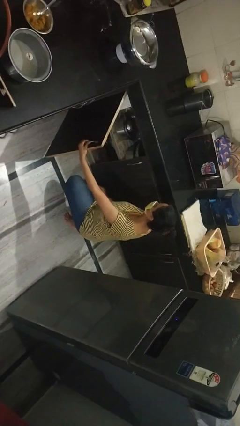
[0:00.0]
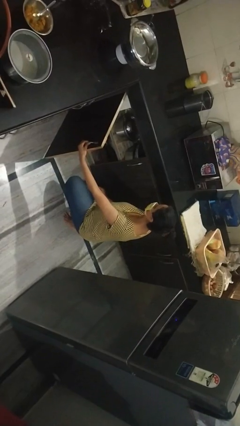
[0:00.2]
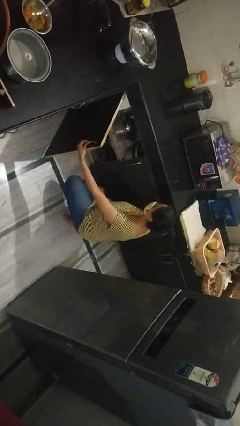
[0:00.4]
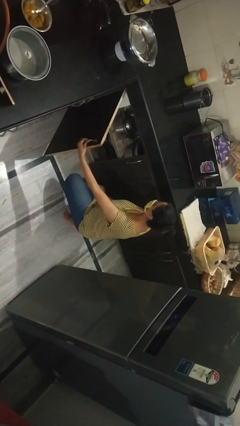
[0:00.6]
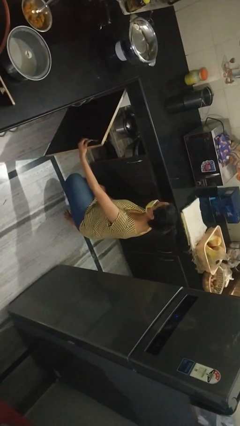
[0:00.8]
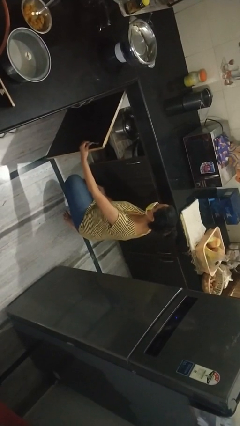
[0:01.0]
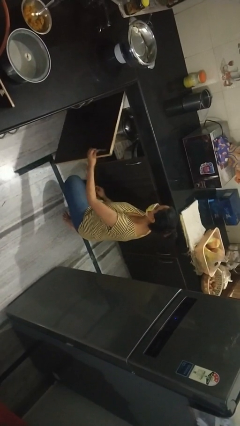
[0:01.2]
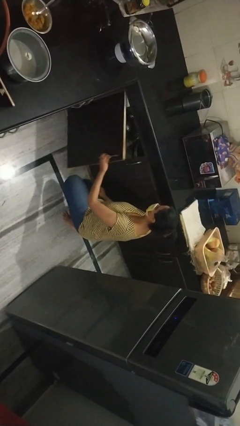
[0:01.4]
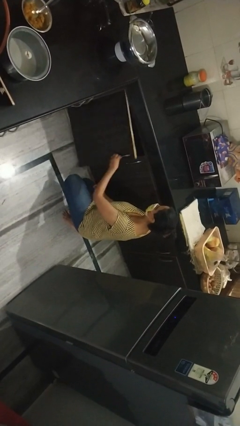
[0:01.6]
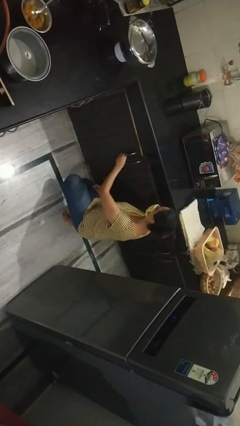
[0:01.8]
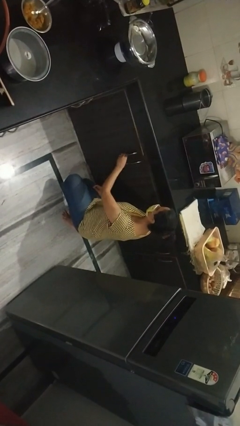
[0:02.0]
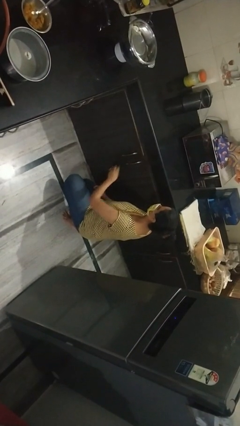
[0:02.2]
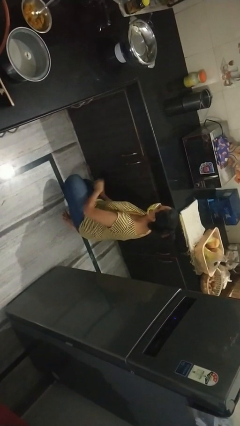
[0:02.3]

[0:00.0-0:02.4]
person closes cabinet

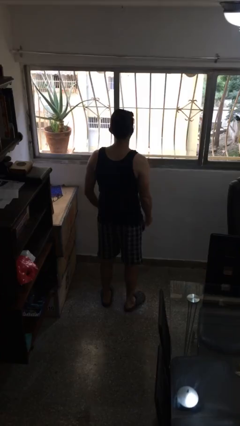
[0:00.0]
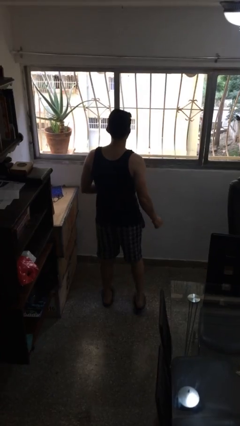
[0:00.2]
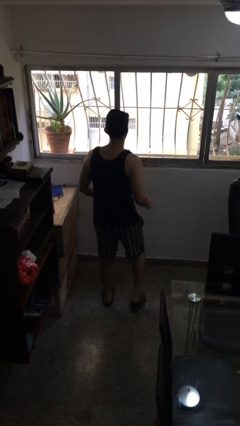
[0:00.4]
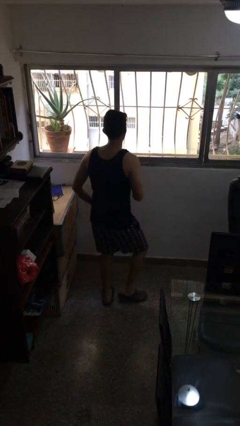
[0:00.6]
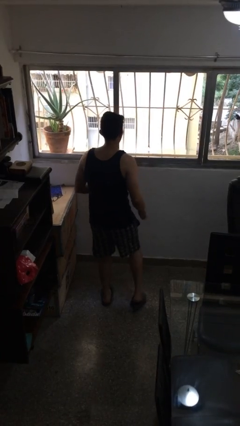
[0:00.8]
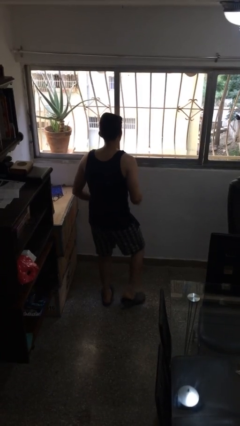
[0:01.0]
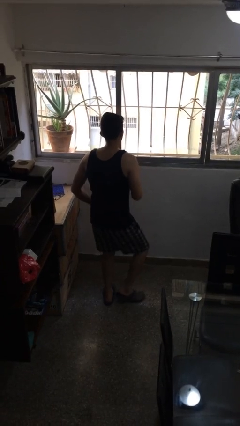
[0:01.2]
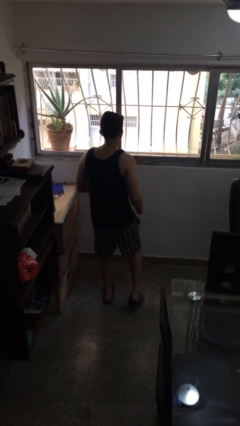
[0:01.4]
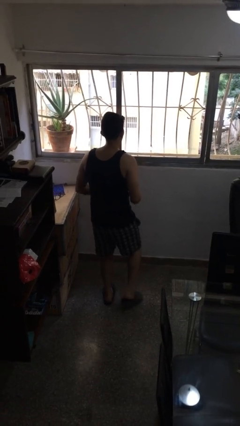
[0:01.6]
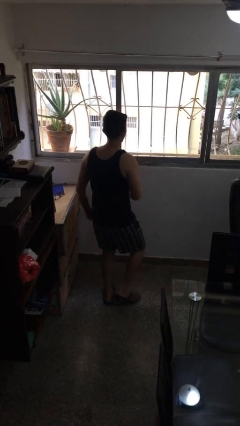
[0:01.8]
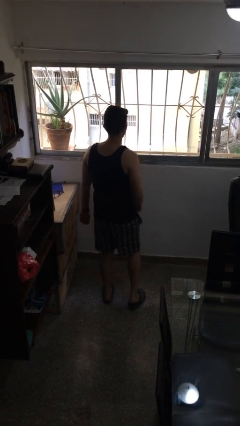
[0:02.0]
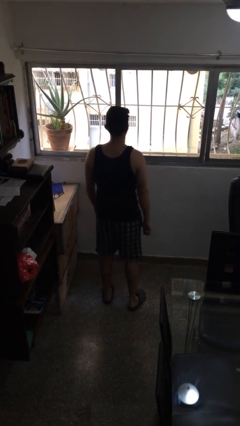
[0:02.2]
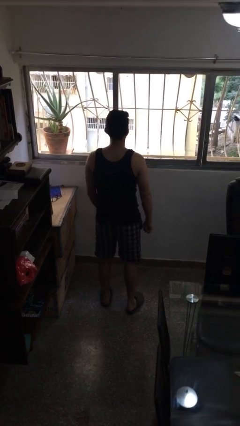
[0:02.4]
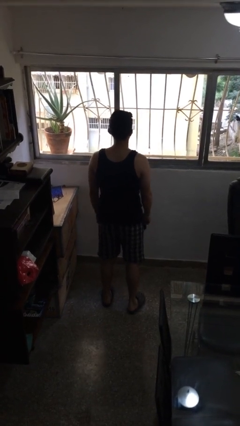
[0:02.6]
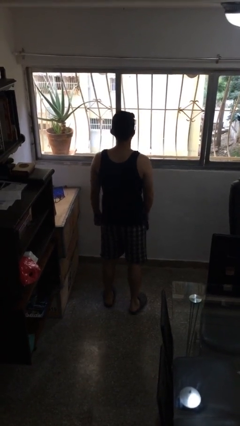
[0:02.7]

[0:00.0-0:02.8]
person dances in place

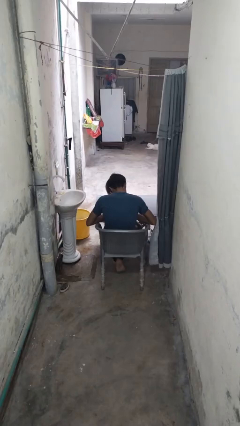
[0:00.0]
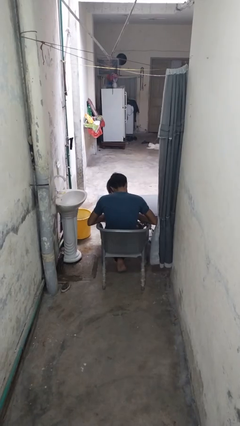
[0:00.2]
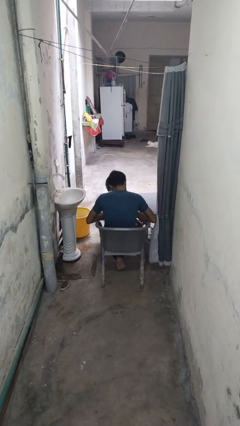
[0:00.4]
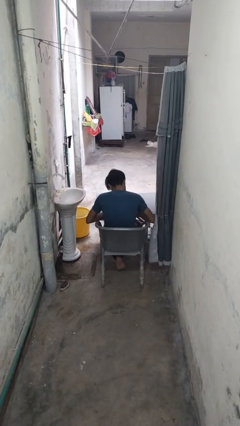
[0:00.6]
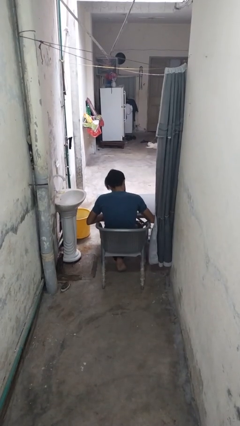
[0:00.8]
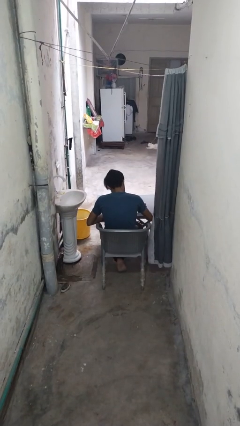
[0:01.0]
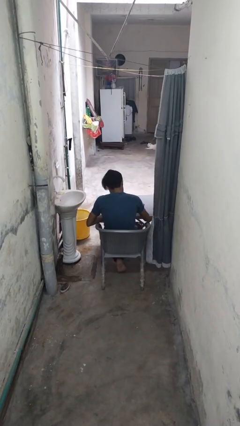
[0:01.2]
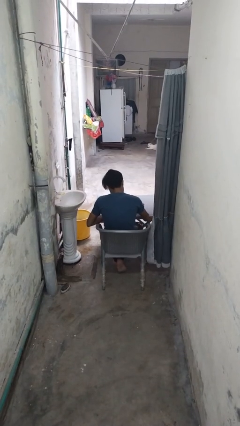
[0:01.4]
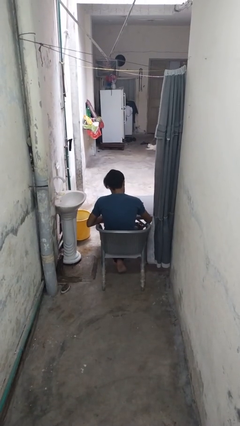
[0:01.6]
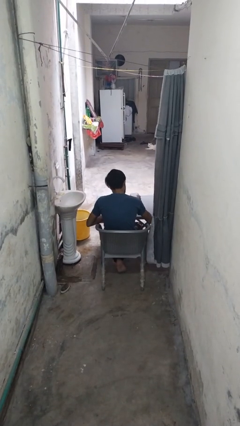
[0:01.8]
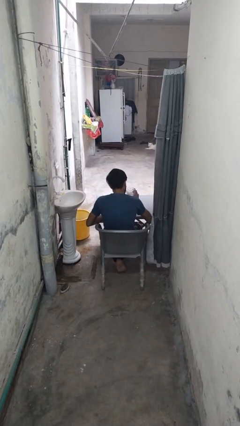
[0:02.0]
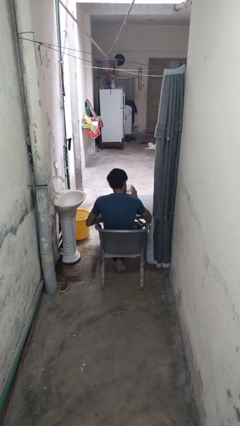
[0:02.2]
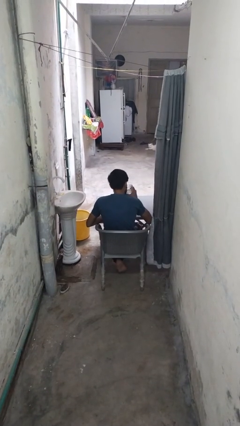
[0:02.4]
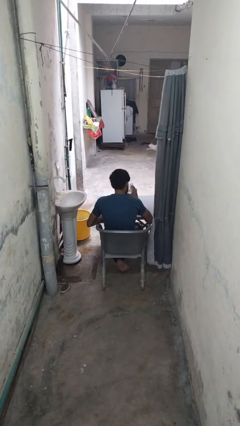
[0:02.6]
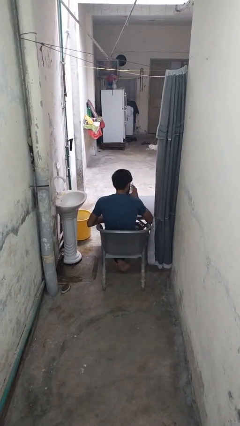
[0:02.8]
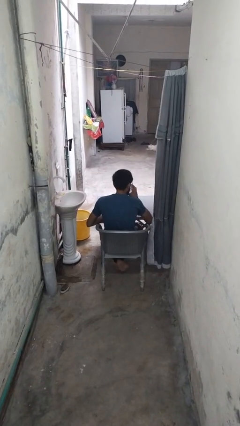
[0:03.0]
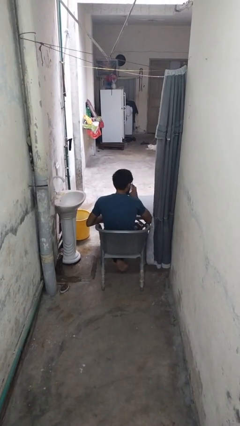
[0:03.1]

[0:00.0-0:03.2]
person picks up object from table

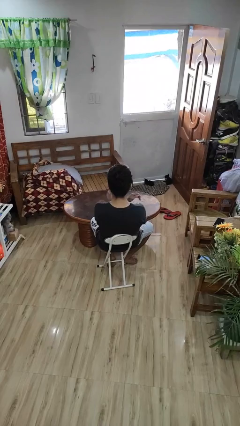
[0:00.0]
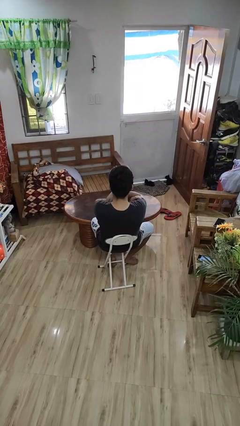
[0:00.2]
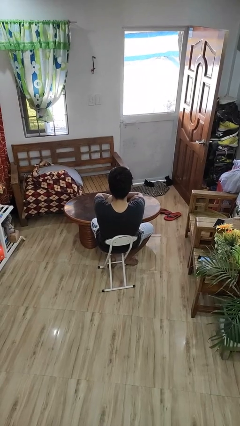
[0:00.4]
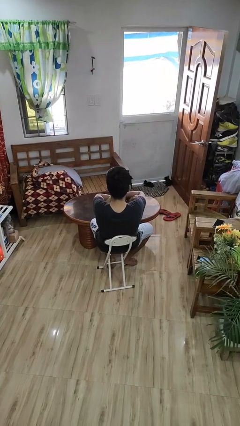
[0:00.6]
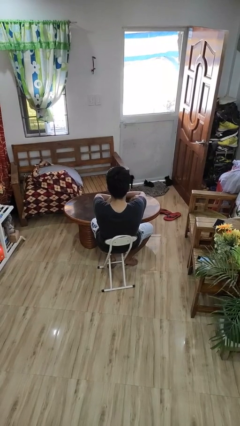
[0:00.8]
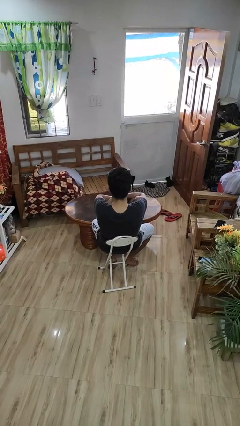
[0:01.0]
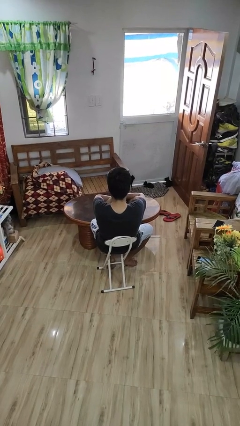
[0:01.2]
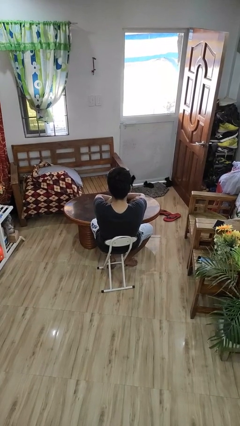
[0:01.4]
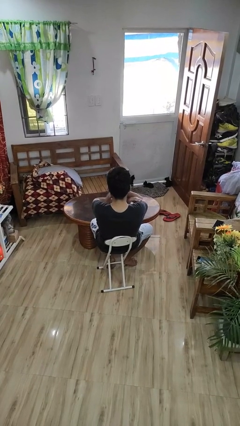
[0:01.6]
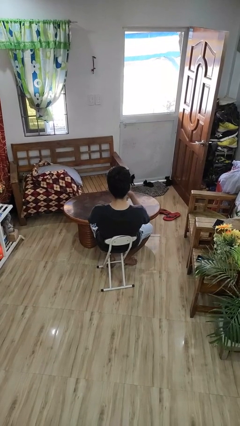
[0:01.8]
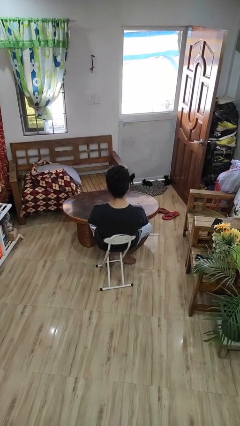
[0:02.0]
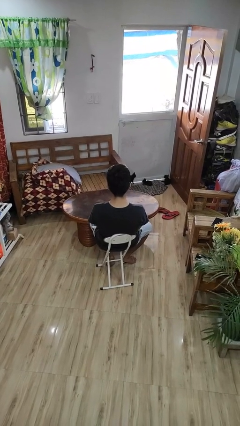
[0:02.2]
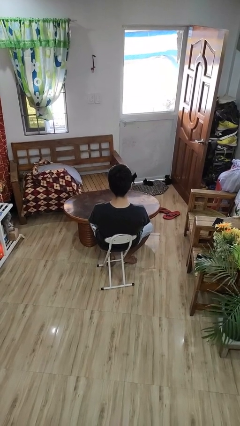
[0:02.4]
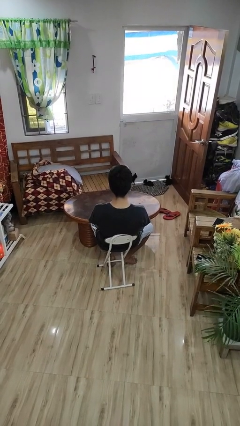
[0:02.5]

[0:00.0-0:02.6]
person crosses arms

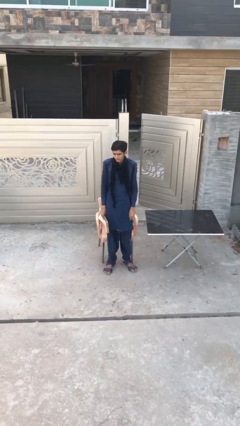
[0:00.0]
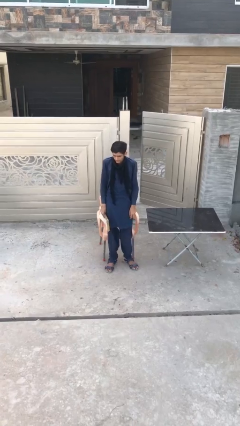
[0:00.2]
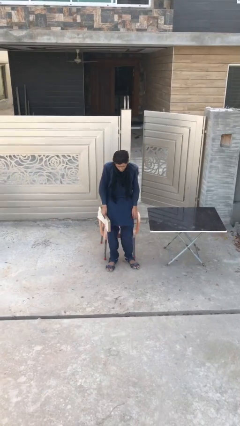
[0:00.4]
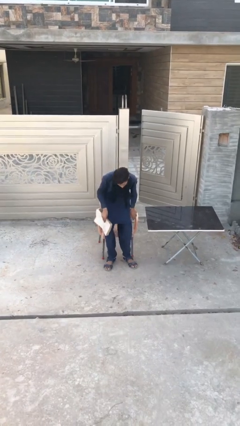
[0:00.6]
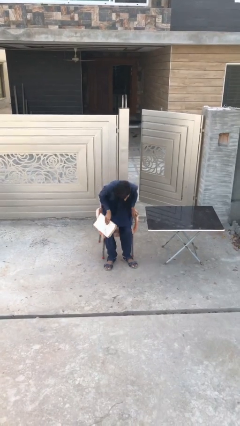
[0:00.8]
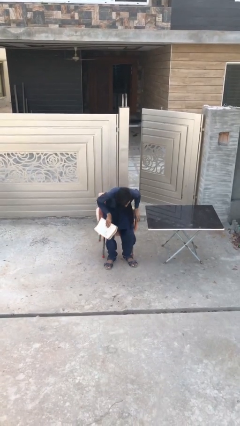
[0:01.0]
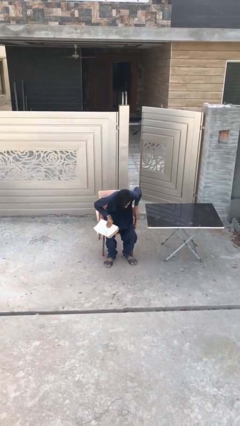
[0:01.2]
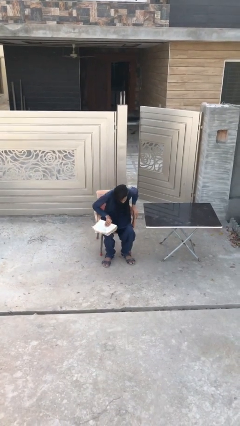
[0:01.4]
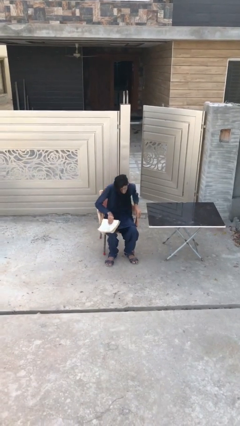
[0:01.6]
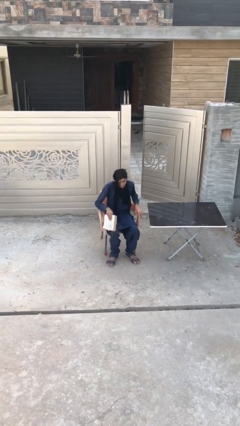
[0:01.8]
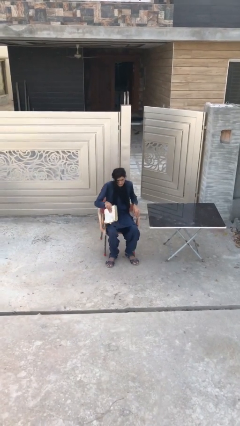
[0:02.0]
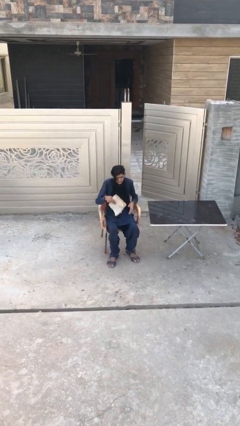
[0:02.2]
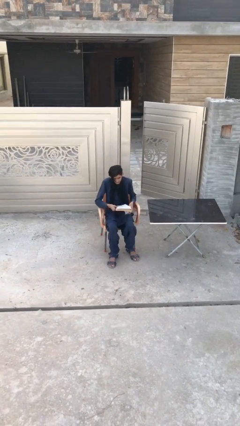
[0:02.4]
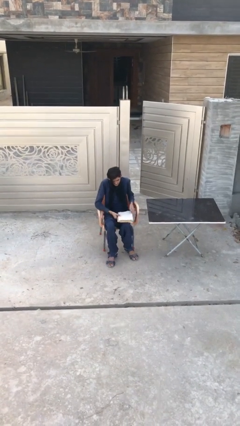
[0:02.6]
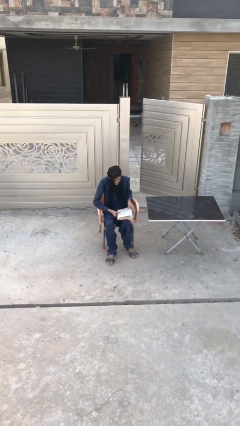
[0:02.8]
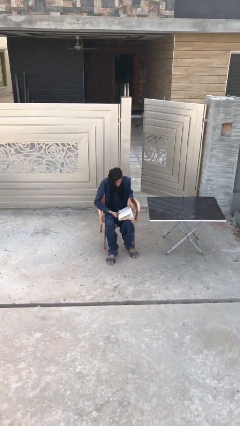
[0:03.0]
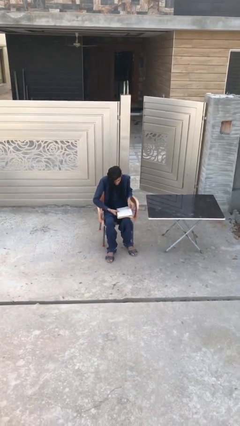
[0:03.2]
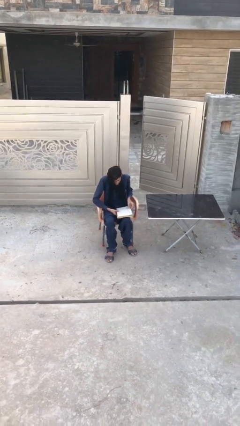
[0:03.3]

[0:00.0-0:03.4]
person sits down

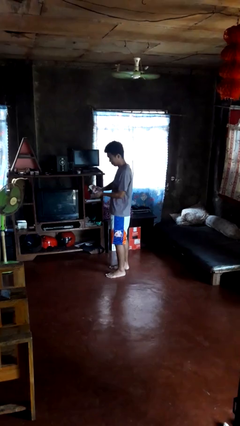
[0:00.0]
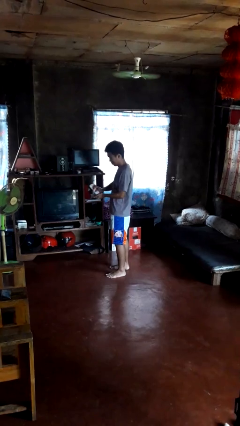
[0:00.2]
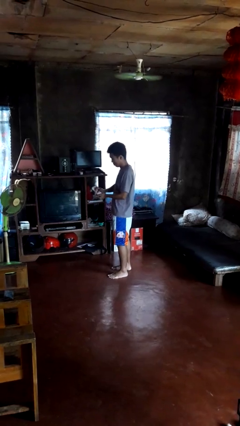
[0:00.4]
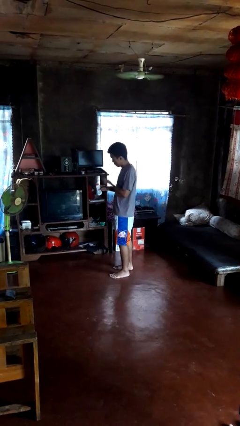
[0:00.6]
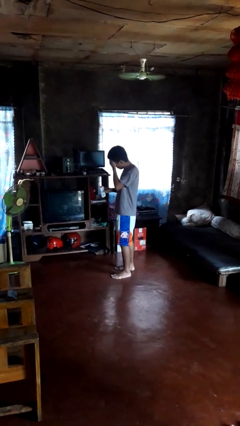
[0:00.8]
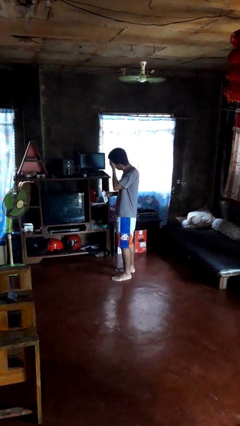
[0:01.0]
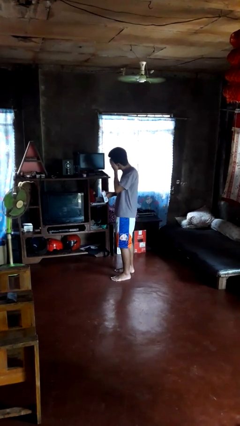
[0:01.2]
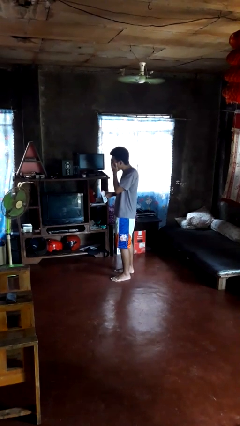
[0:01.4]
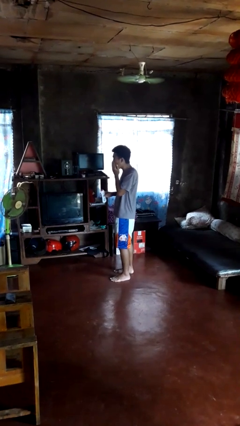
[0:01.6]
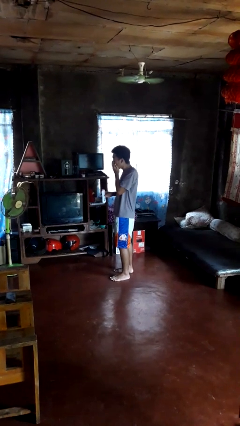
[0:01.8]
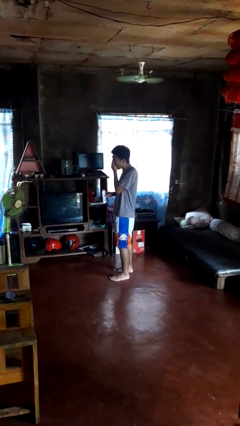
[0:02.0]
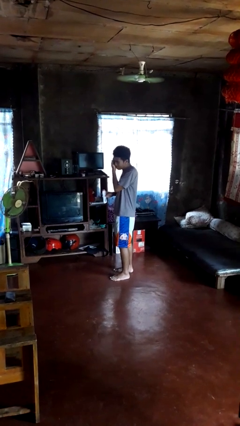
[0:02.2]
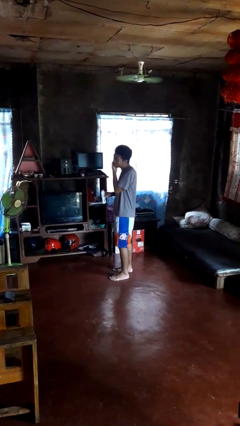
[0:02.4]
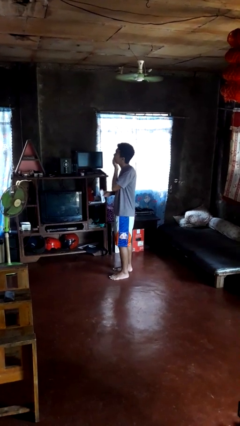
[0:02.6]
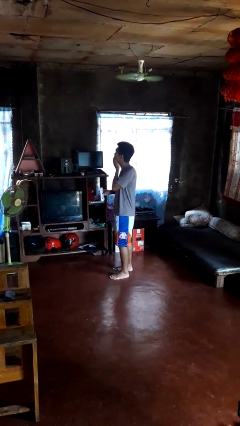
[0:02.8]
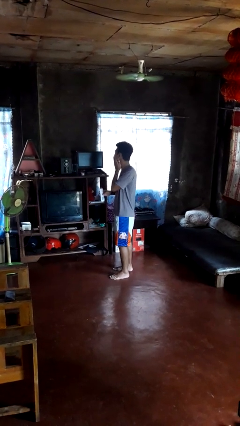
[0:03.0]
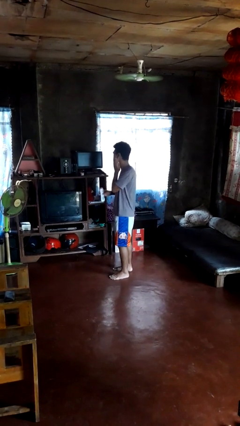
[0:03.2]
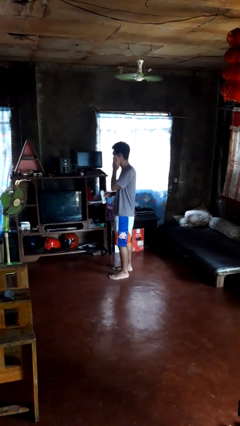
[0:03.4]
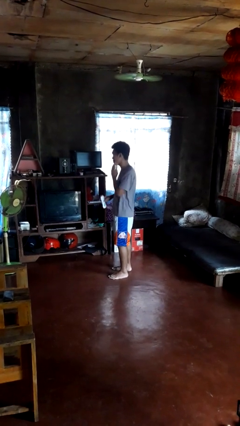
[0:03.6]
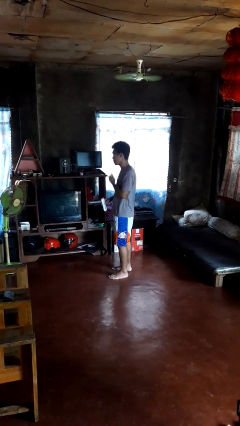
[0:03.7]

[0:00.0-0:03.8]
person applies facial moisturizer
